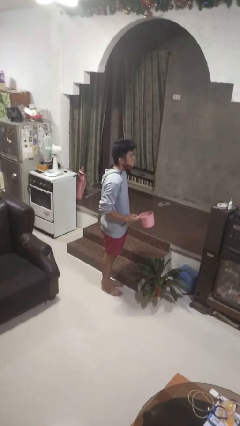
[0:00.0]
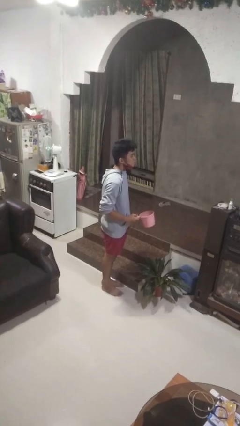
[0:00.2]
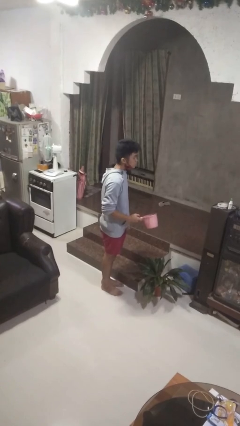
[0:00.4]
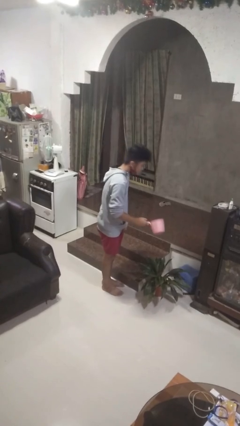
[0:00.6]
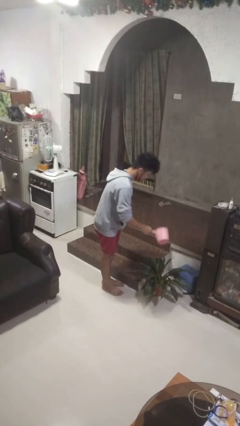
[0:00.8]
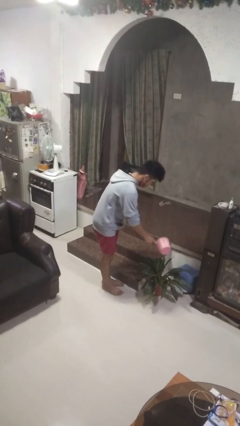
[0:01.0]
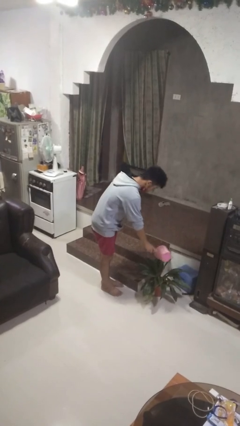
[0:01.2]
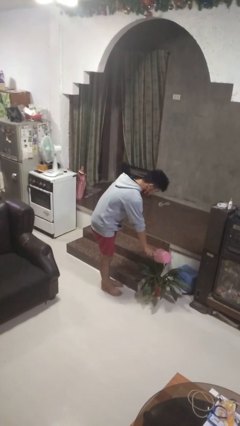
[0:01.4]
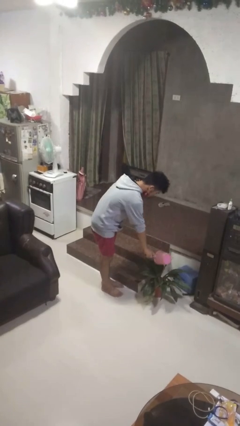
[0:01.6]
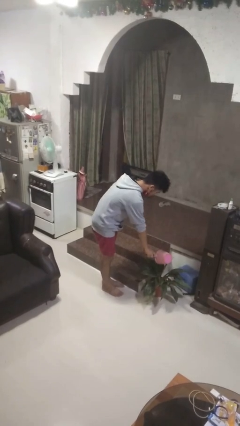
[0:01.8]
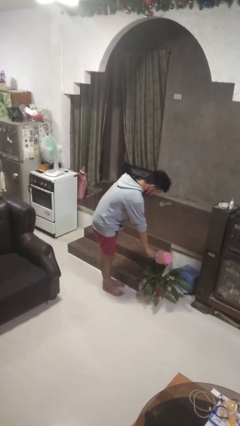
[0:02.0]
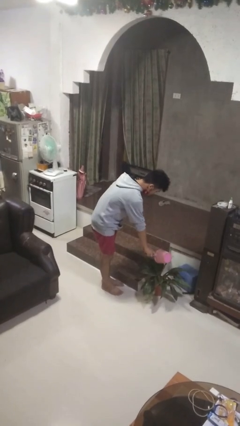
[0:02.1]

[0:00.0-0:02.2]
person waters houseplant

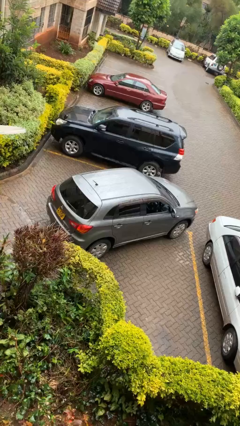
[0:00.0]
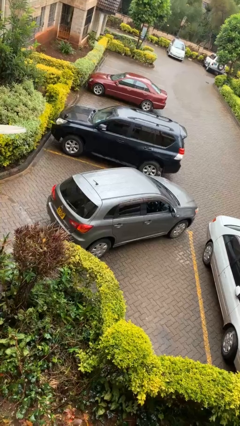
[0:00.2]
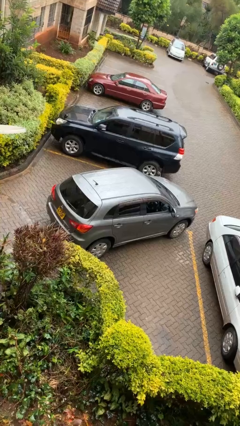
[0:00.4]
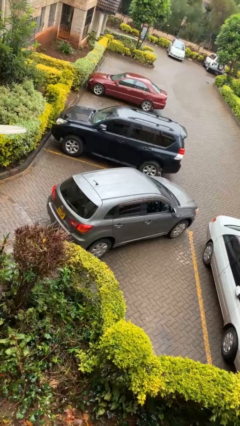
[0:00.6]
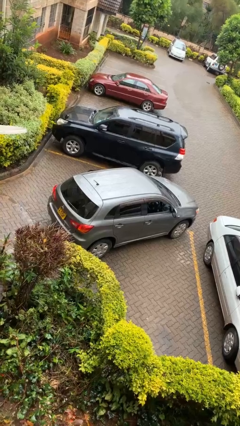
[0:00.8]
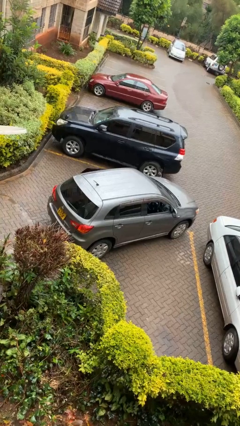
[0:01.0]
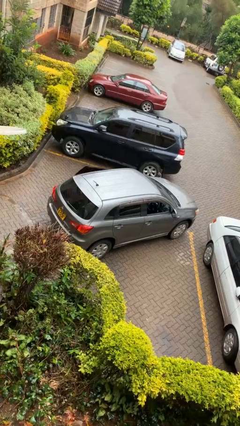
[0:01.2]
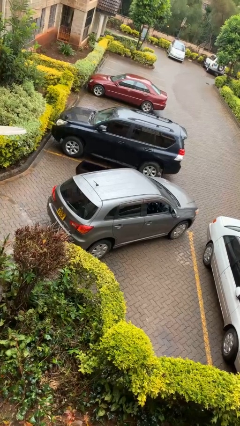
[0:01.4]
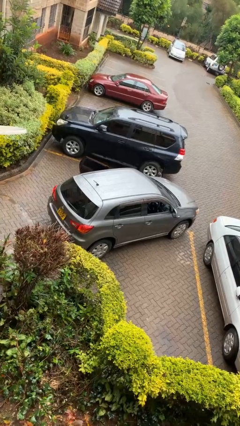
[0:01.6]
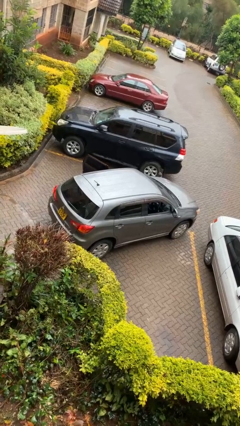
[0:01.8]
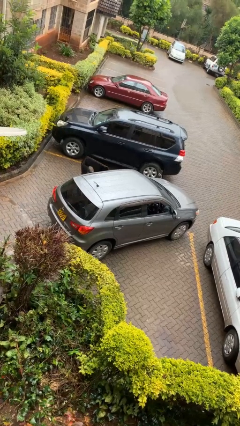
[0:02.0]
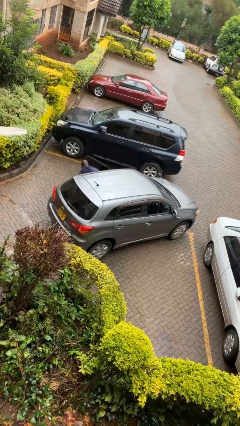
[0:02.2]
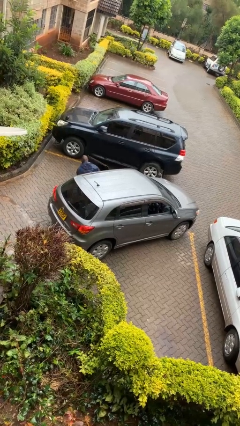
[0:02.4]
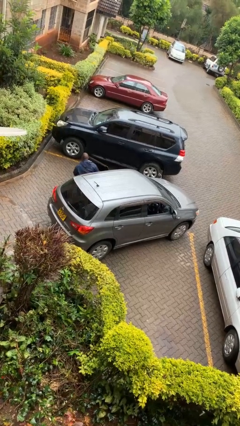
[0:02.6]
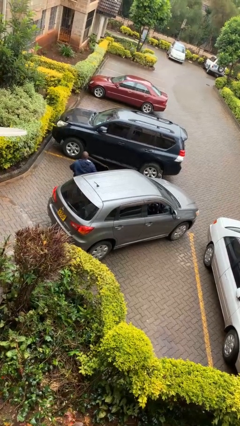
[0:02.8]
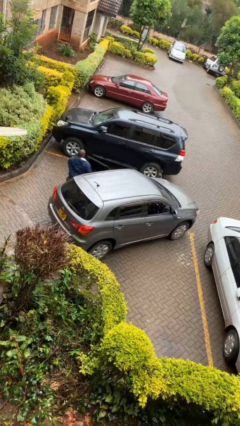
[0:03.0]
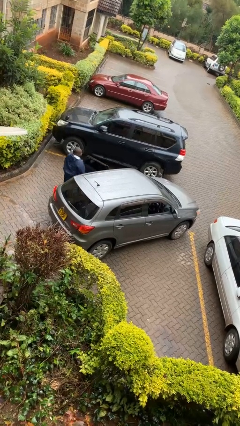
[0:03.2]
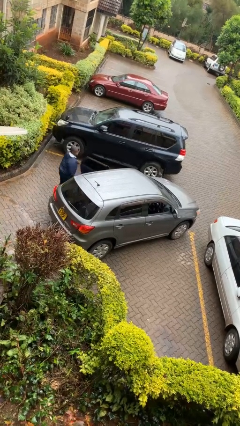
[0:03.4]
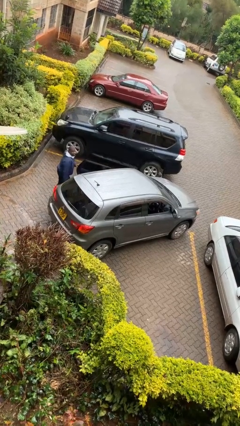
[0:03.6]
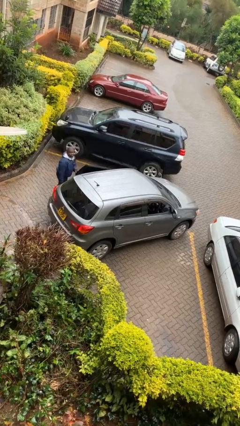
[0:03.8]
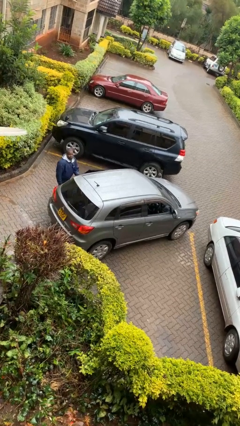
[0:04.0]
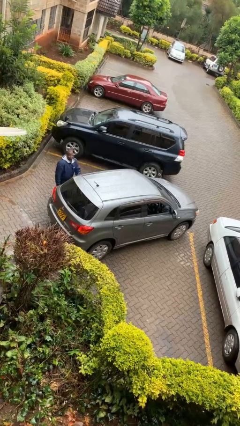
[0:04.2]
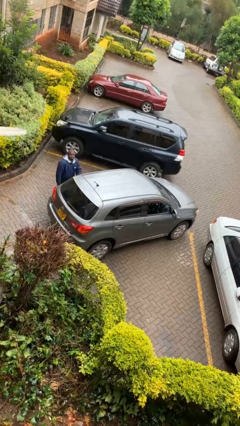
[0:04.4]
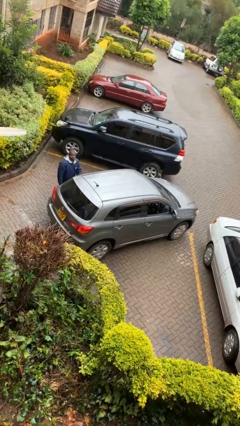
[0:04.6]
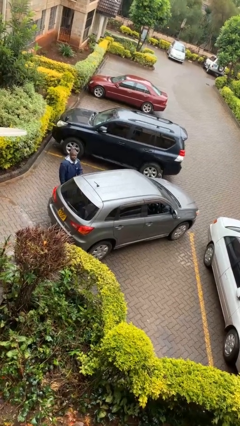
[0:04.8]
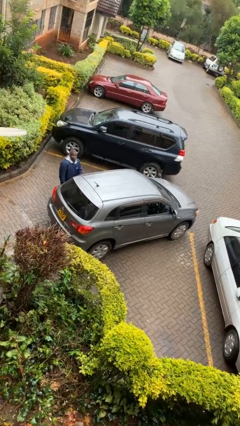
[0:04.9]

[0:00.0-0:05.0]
car drops off person

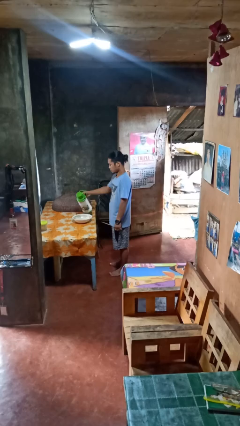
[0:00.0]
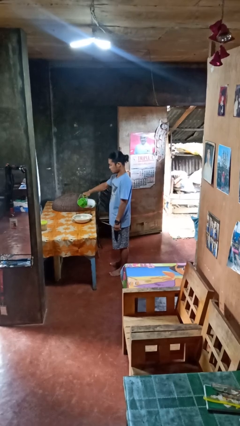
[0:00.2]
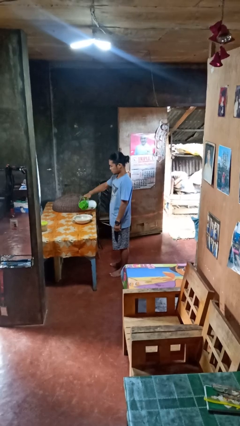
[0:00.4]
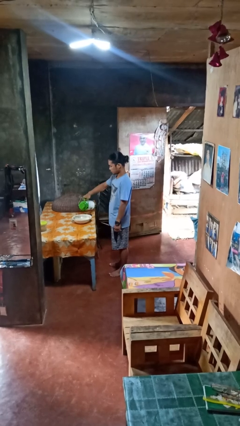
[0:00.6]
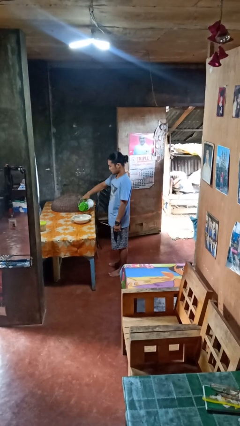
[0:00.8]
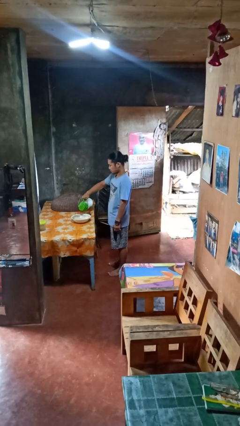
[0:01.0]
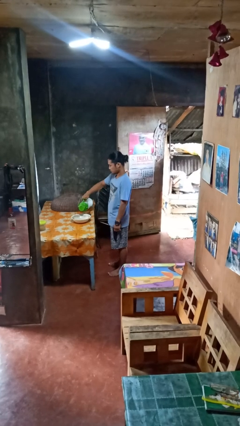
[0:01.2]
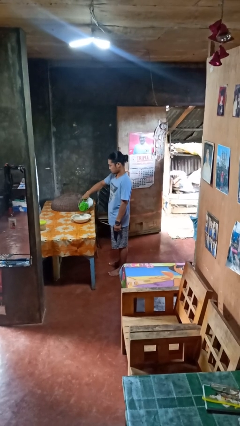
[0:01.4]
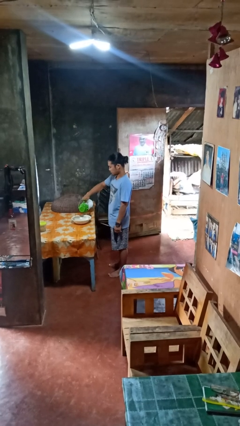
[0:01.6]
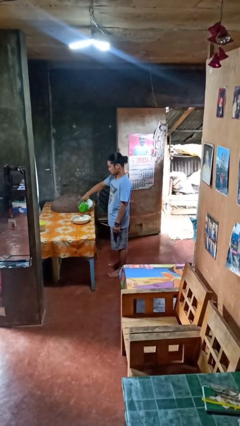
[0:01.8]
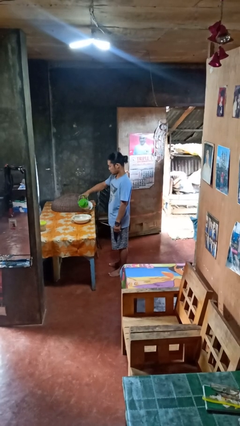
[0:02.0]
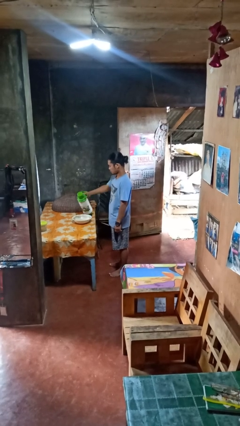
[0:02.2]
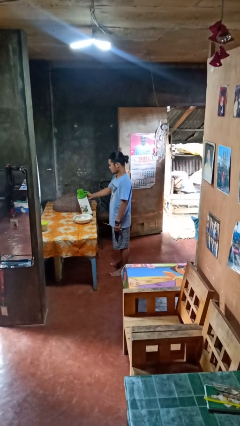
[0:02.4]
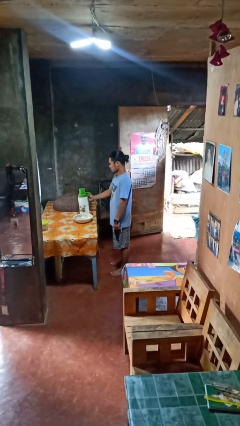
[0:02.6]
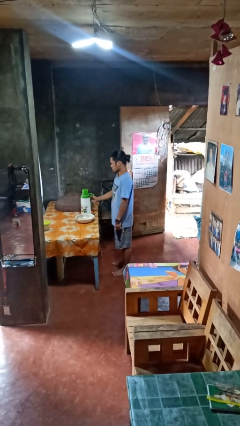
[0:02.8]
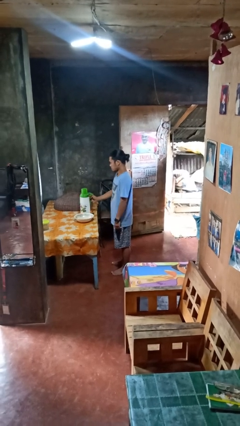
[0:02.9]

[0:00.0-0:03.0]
person pours into bowl

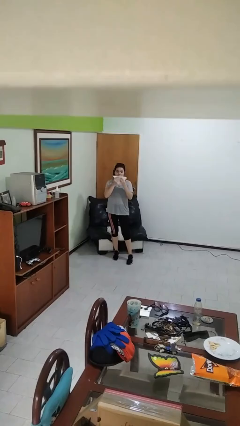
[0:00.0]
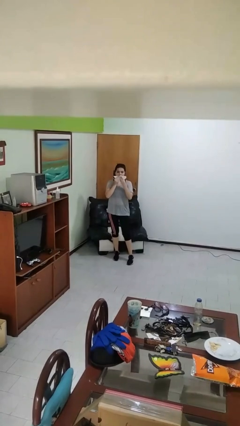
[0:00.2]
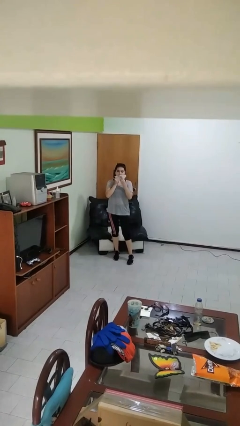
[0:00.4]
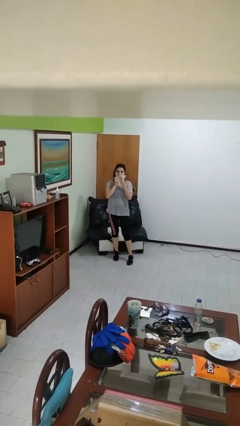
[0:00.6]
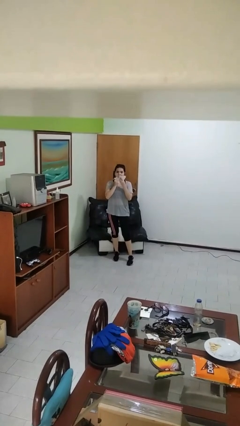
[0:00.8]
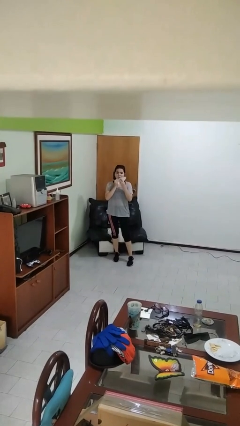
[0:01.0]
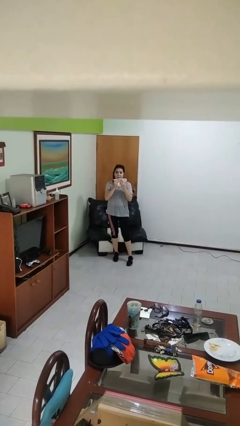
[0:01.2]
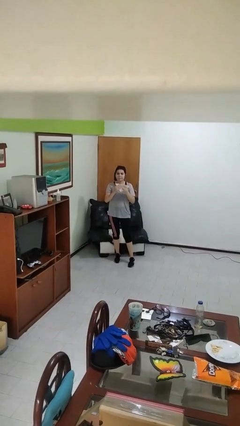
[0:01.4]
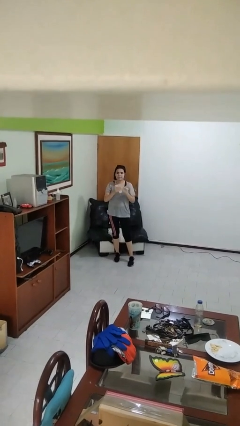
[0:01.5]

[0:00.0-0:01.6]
person wipes mouth with napkin

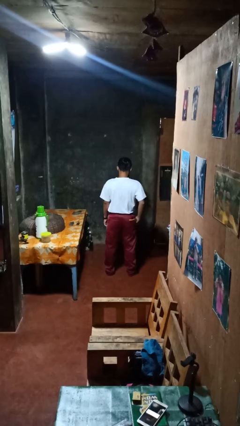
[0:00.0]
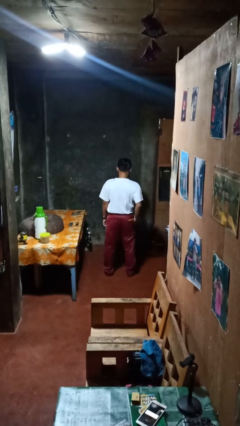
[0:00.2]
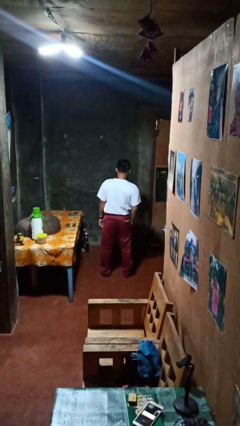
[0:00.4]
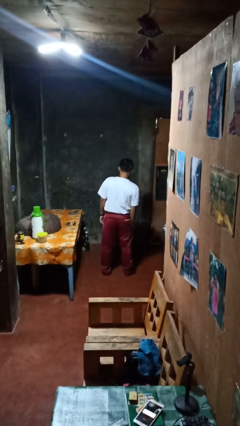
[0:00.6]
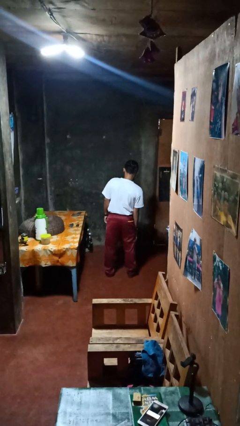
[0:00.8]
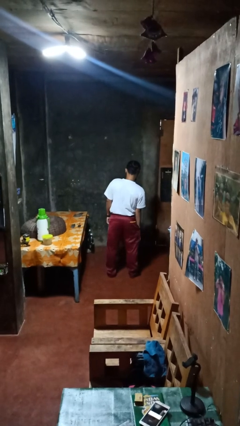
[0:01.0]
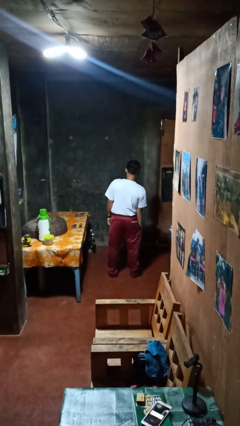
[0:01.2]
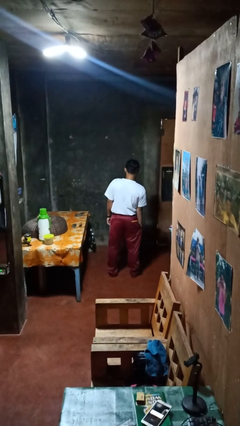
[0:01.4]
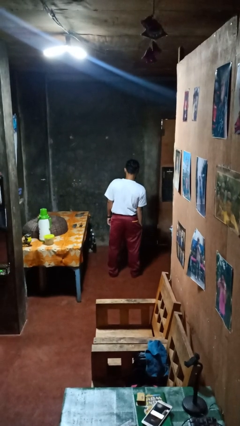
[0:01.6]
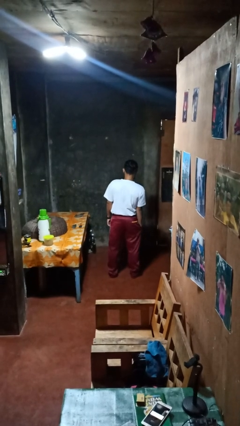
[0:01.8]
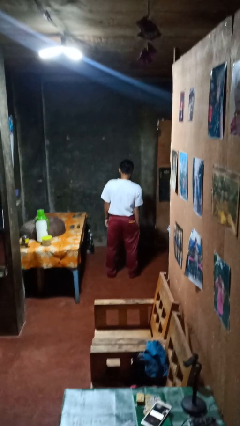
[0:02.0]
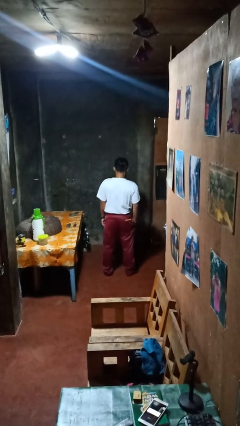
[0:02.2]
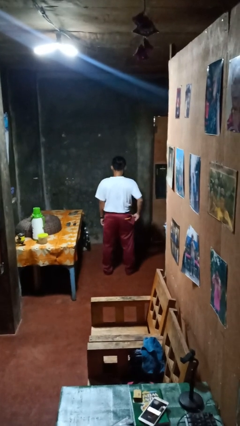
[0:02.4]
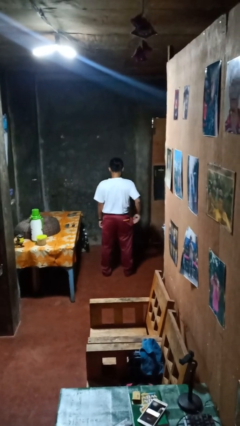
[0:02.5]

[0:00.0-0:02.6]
person puts hands in back pockets

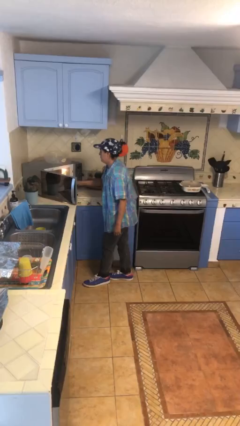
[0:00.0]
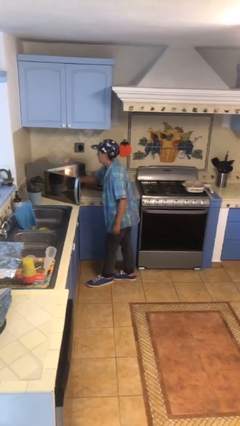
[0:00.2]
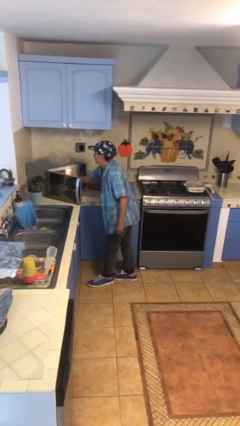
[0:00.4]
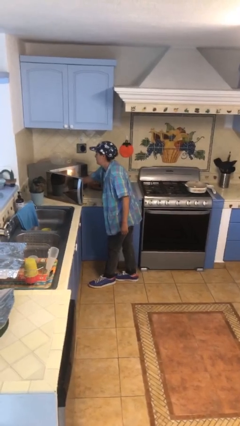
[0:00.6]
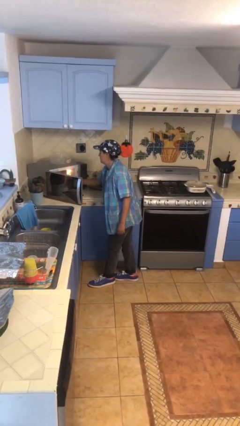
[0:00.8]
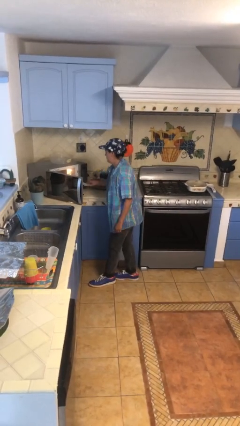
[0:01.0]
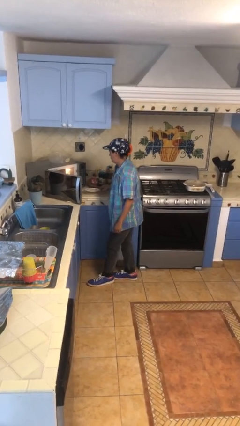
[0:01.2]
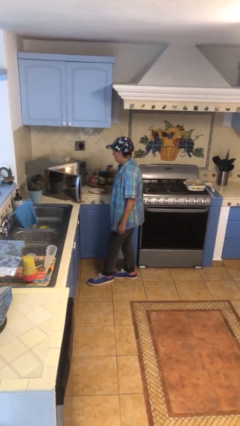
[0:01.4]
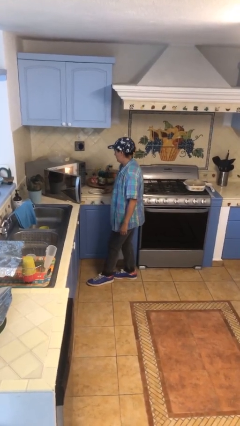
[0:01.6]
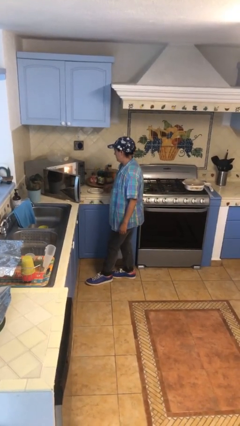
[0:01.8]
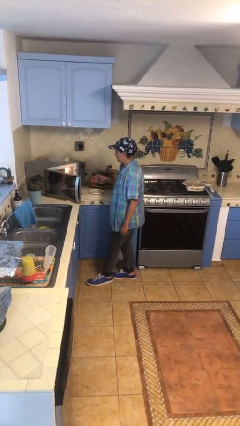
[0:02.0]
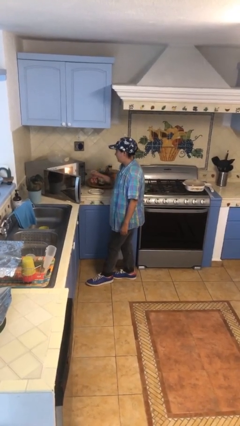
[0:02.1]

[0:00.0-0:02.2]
person takes object from microwave

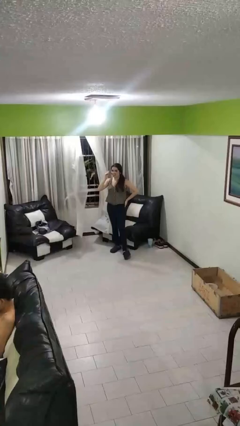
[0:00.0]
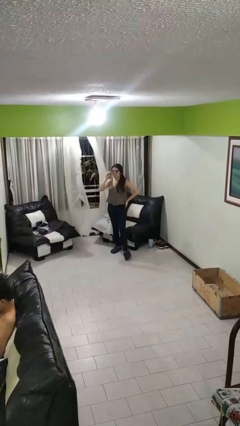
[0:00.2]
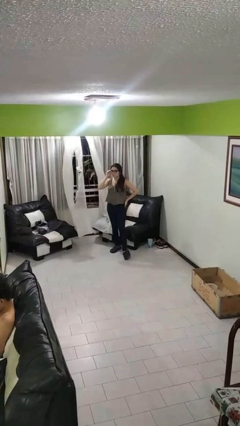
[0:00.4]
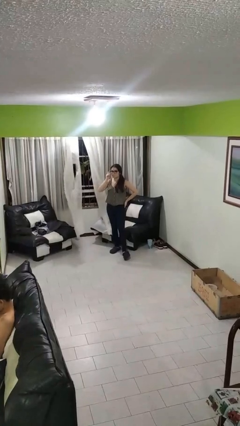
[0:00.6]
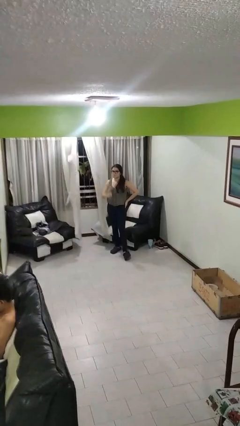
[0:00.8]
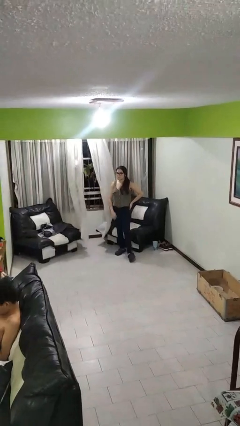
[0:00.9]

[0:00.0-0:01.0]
person puts on glasses
